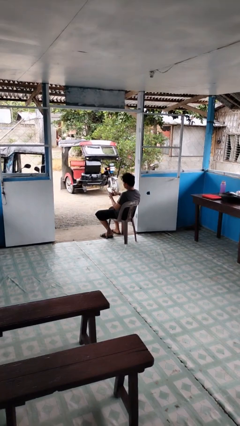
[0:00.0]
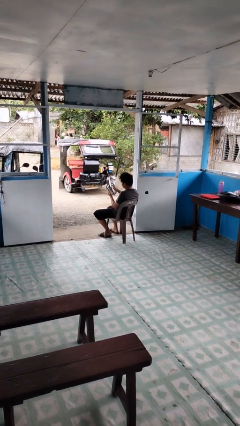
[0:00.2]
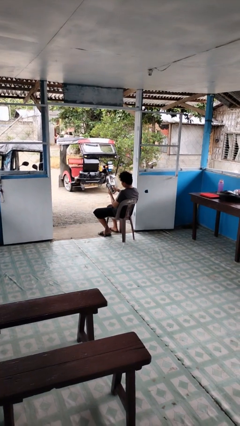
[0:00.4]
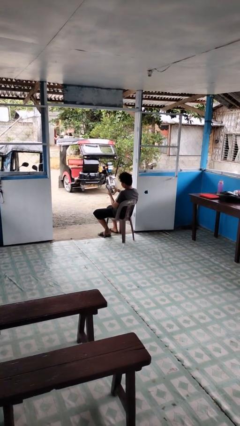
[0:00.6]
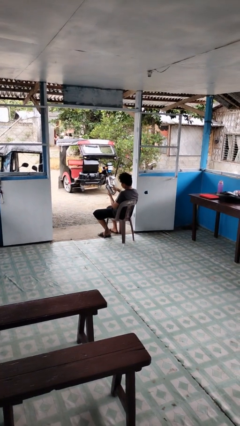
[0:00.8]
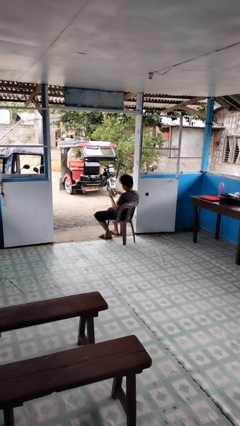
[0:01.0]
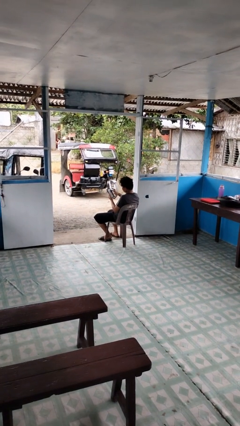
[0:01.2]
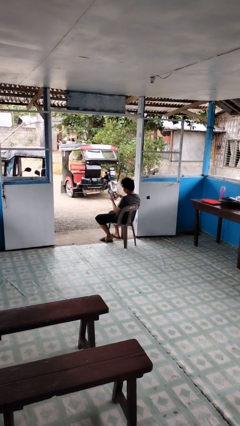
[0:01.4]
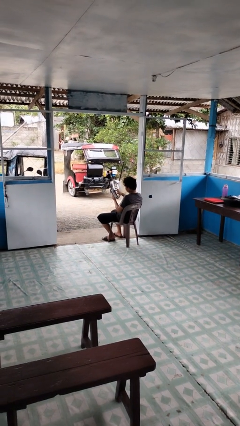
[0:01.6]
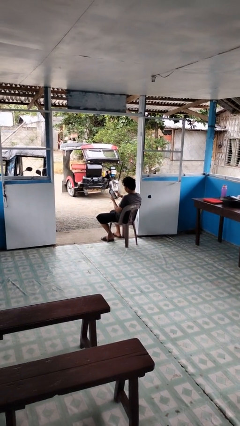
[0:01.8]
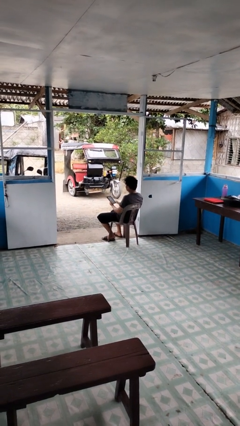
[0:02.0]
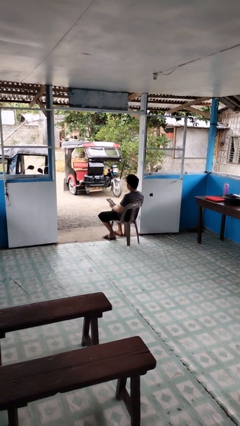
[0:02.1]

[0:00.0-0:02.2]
person interacts with tablet

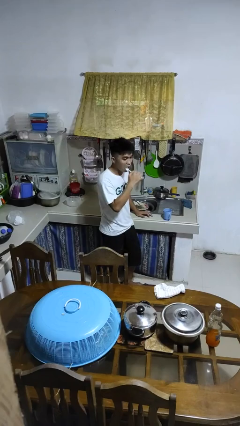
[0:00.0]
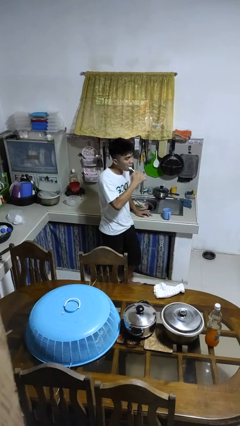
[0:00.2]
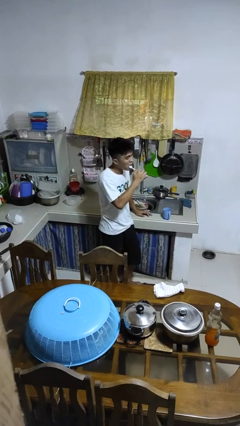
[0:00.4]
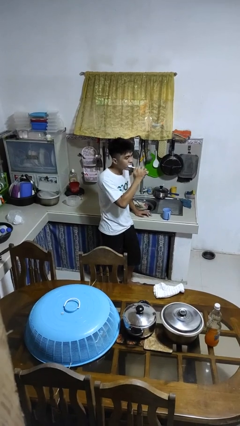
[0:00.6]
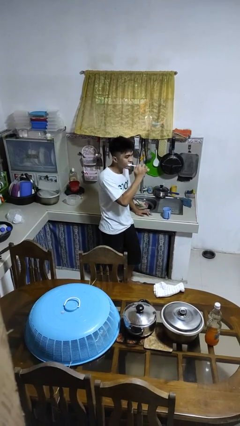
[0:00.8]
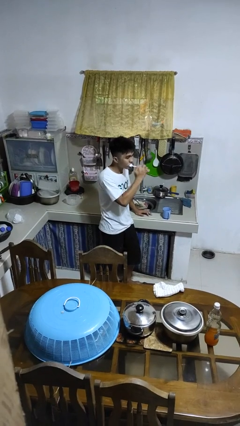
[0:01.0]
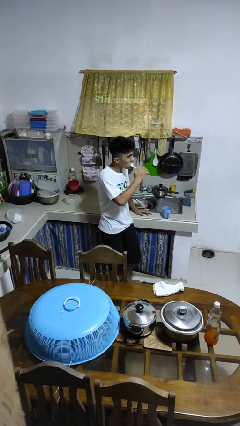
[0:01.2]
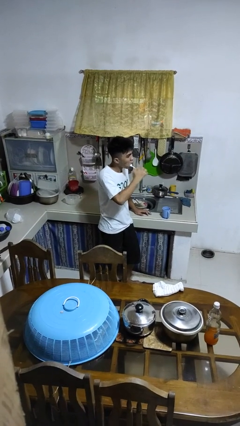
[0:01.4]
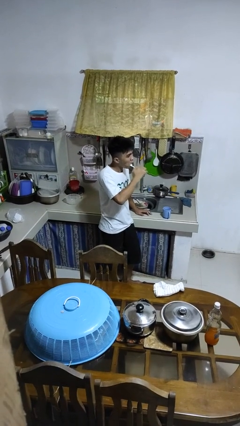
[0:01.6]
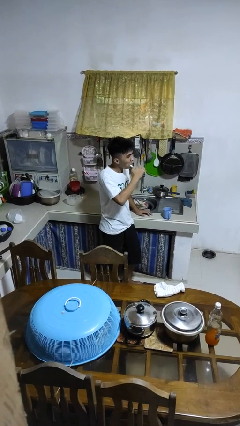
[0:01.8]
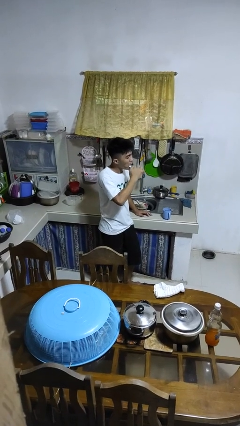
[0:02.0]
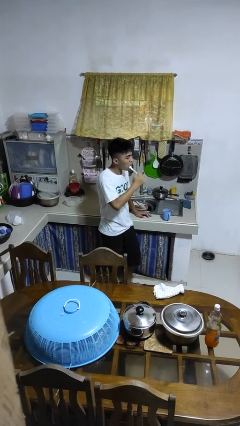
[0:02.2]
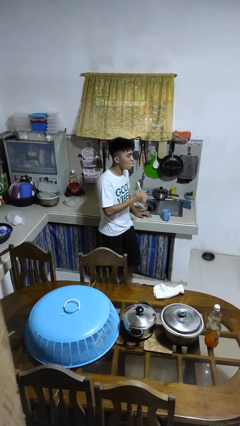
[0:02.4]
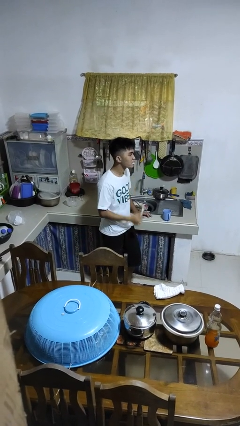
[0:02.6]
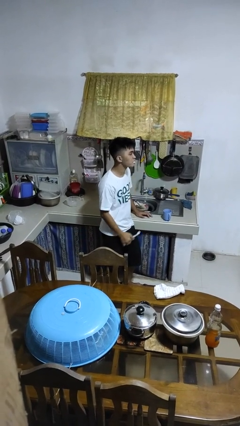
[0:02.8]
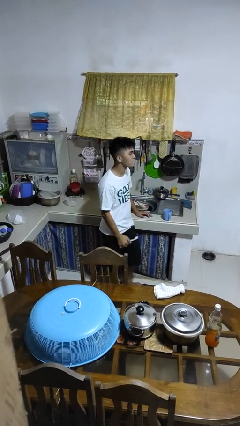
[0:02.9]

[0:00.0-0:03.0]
person brushes teeth

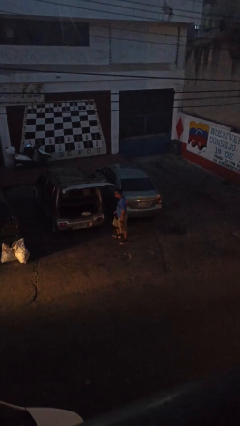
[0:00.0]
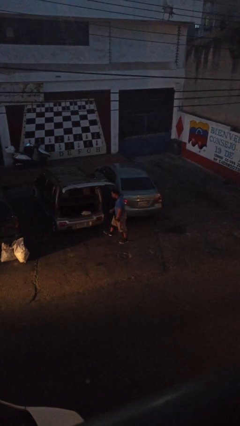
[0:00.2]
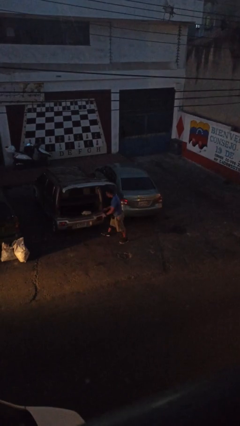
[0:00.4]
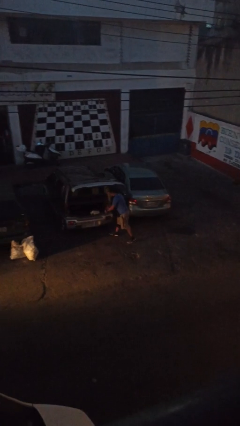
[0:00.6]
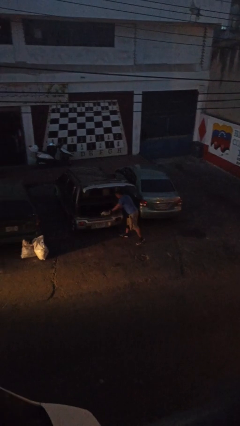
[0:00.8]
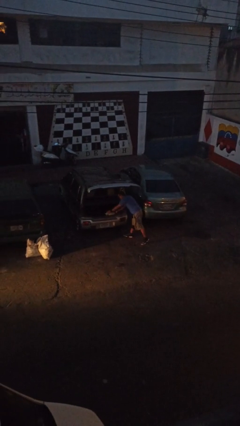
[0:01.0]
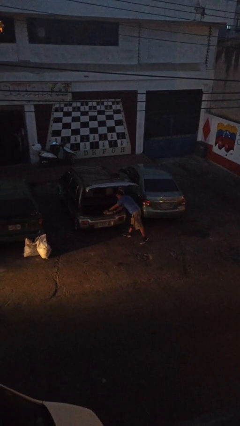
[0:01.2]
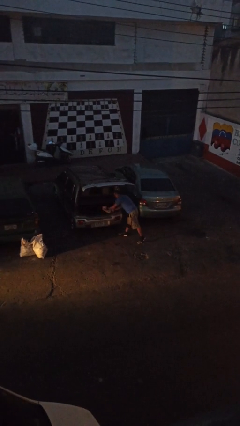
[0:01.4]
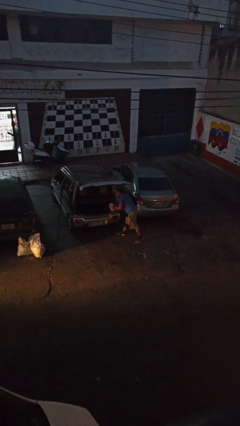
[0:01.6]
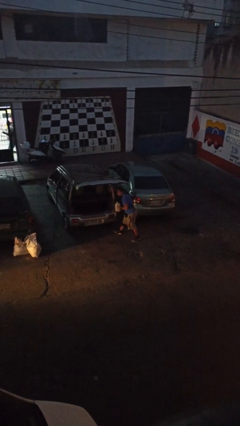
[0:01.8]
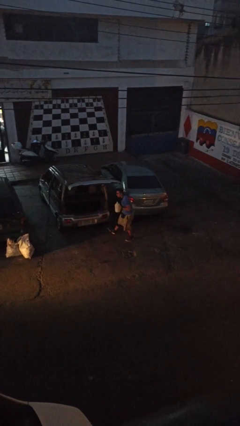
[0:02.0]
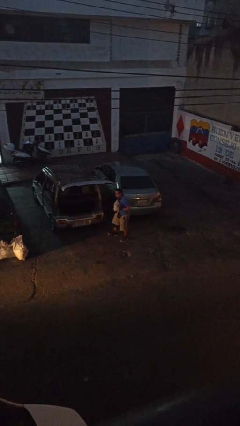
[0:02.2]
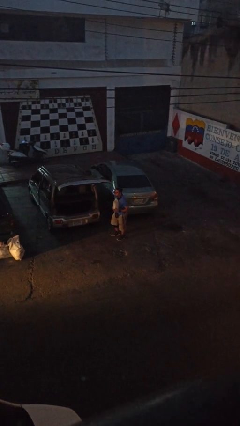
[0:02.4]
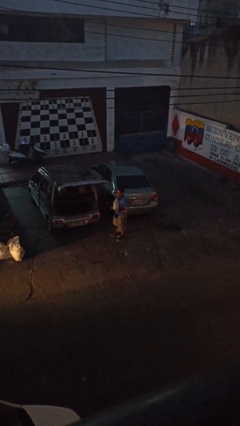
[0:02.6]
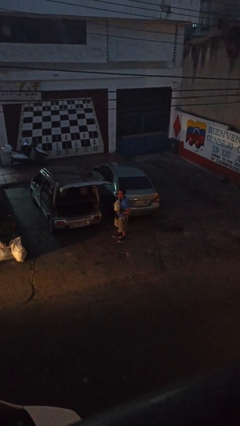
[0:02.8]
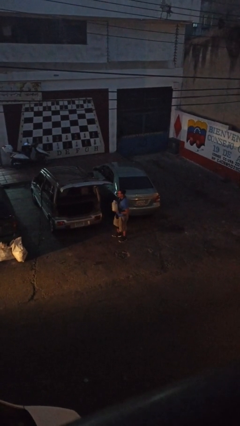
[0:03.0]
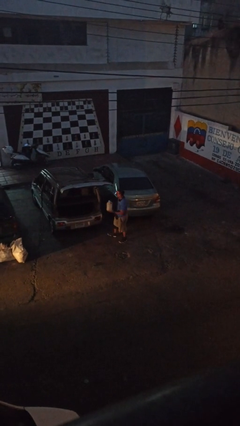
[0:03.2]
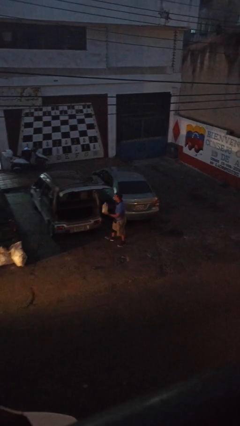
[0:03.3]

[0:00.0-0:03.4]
person unloads car

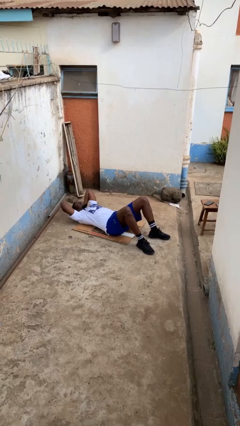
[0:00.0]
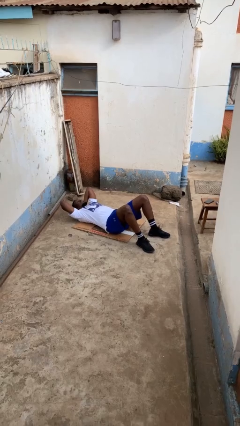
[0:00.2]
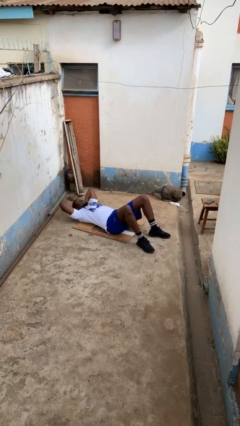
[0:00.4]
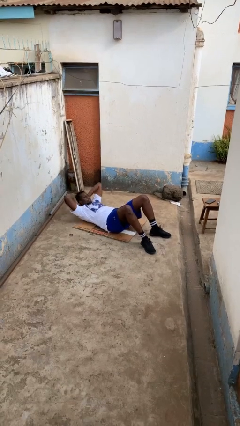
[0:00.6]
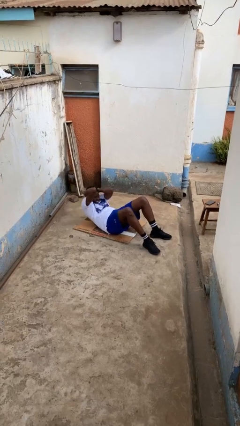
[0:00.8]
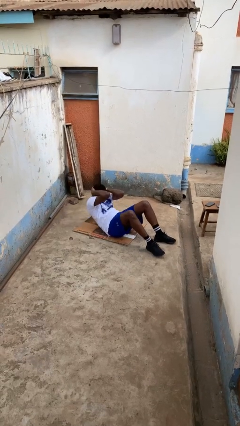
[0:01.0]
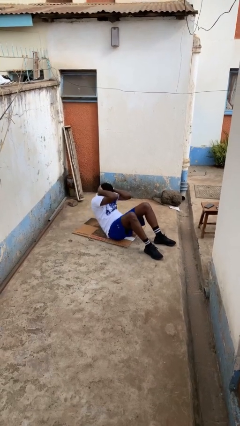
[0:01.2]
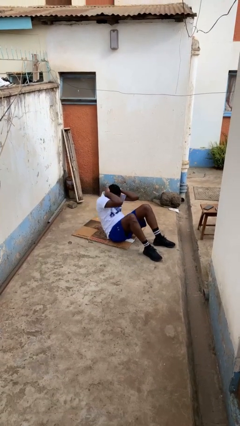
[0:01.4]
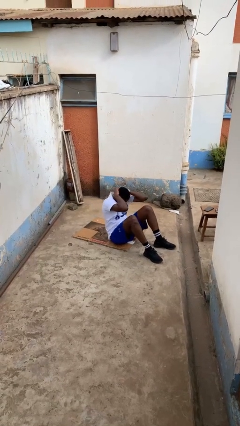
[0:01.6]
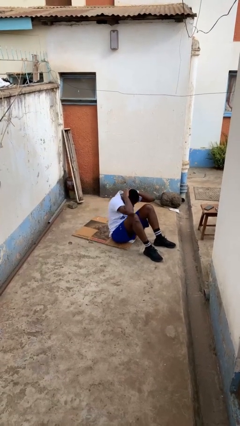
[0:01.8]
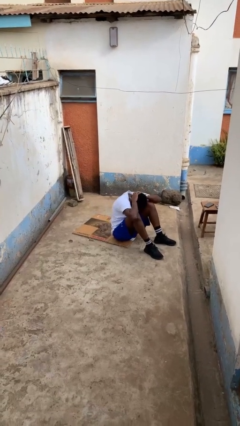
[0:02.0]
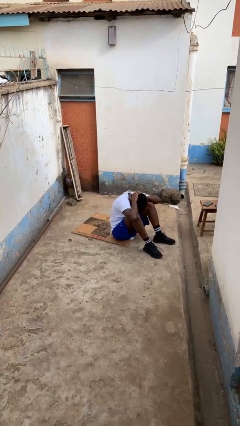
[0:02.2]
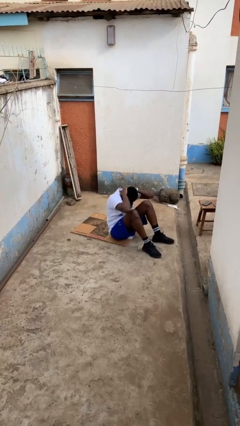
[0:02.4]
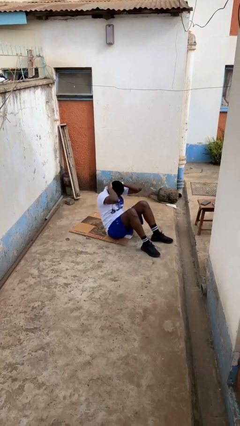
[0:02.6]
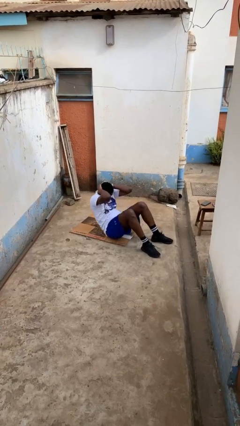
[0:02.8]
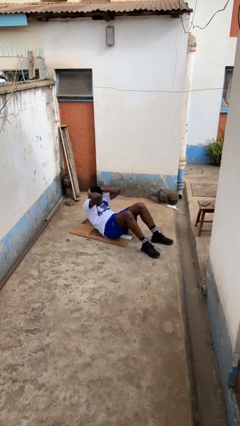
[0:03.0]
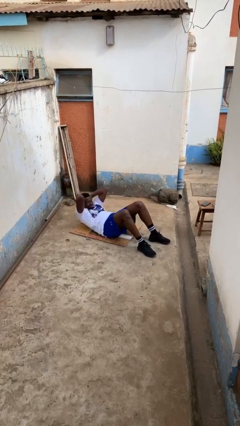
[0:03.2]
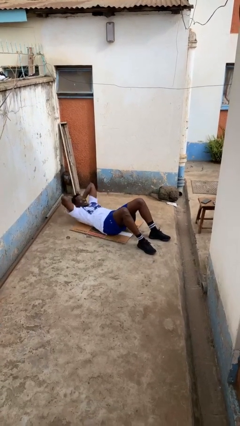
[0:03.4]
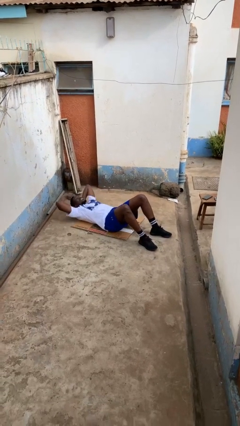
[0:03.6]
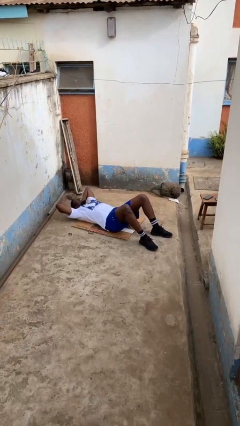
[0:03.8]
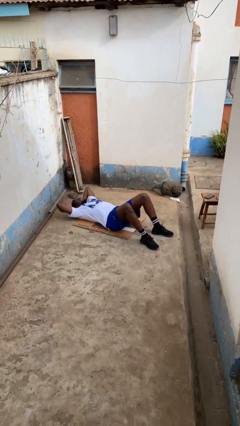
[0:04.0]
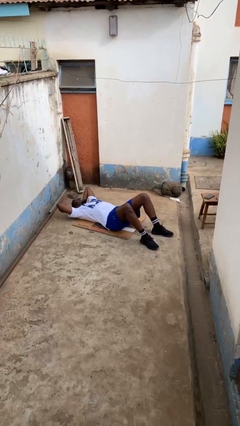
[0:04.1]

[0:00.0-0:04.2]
person exercises with situp

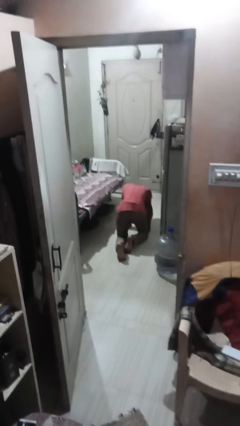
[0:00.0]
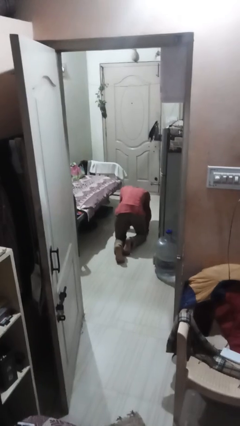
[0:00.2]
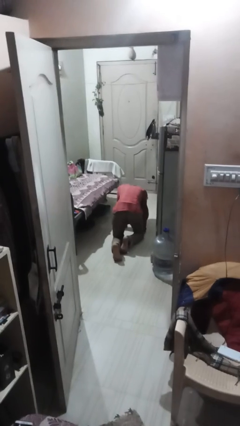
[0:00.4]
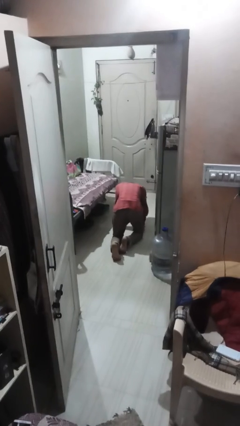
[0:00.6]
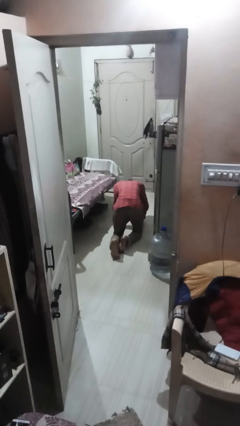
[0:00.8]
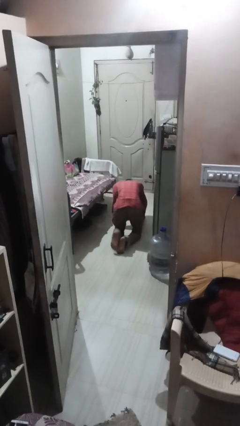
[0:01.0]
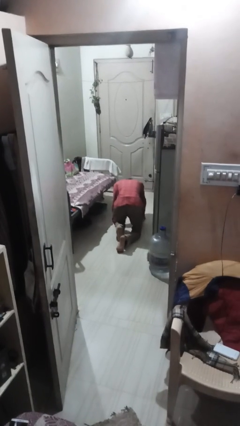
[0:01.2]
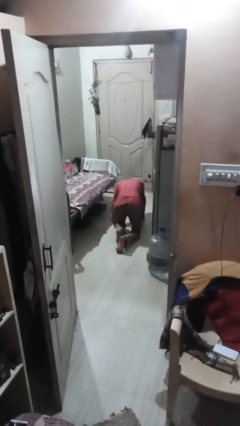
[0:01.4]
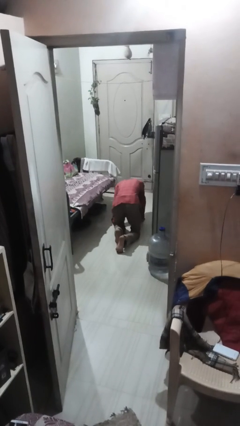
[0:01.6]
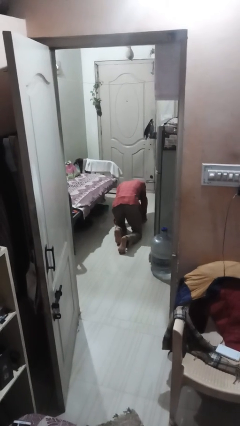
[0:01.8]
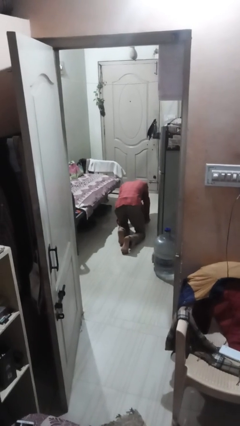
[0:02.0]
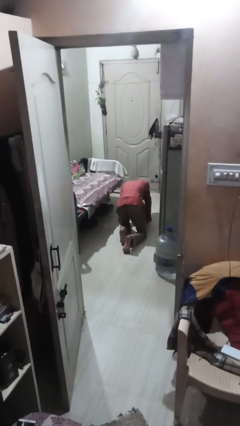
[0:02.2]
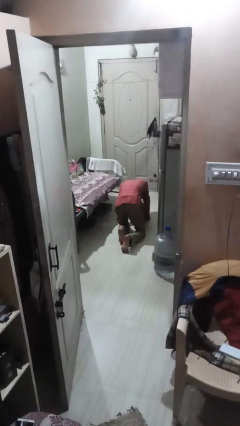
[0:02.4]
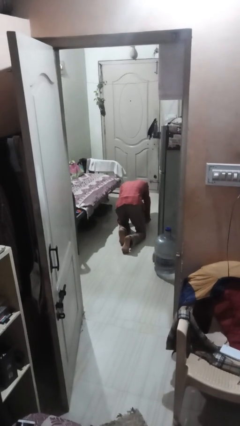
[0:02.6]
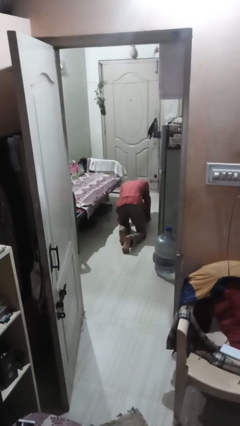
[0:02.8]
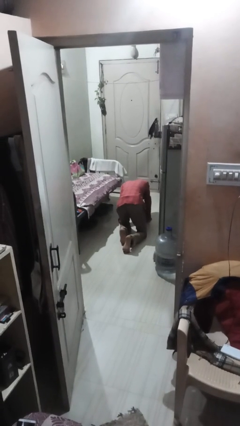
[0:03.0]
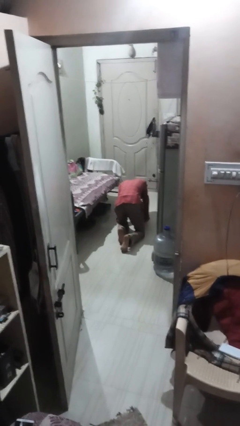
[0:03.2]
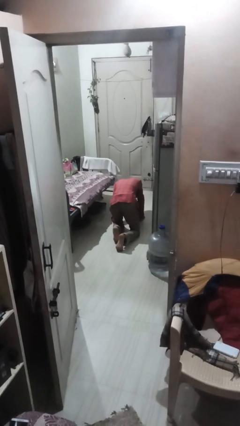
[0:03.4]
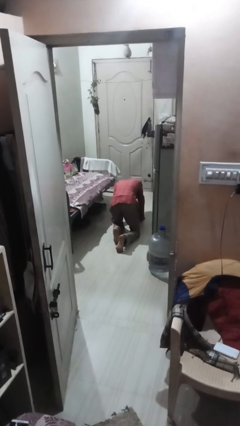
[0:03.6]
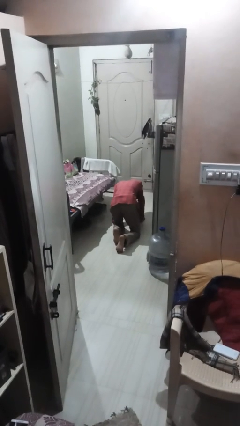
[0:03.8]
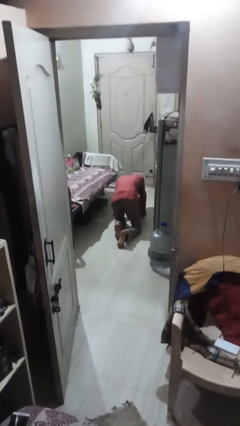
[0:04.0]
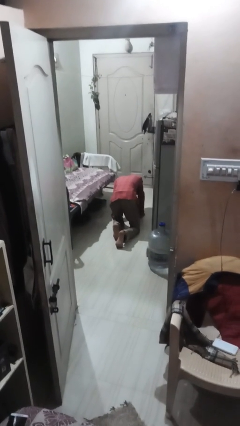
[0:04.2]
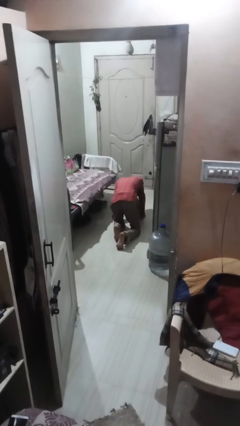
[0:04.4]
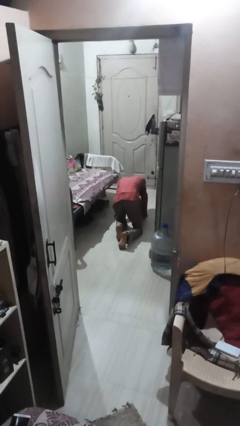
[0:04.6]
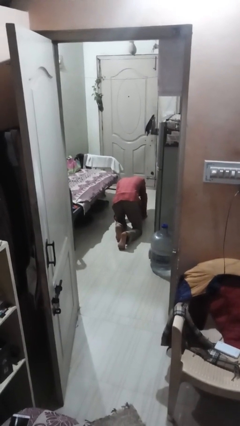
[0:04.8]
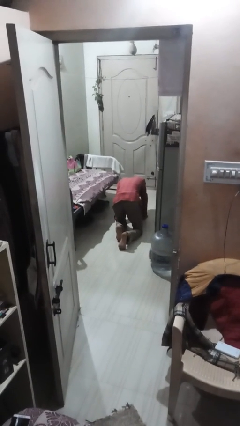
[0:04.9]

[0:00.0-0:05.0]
person crawls
